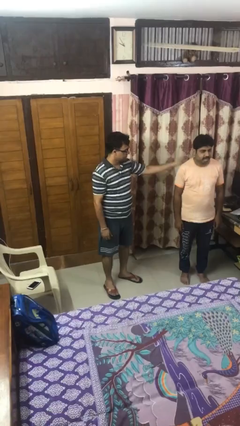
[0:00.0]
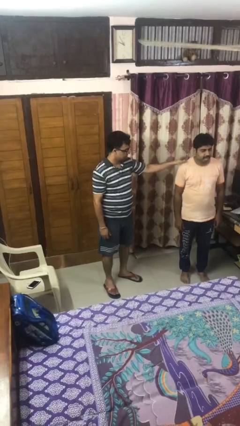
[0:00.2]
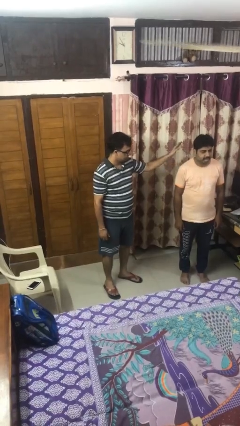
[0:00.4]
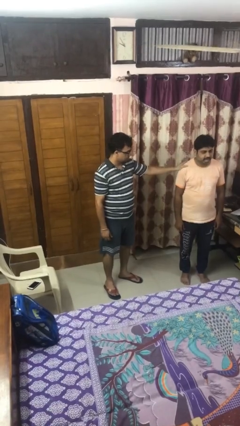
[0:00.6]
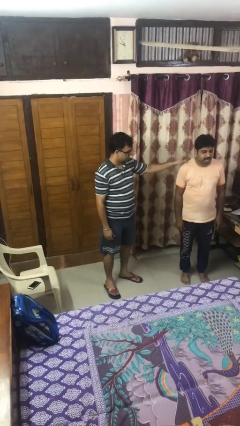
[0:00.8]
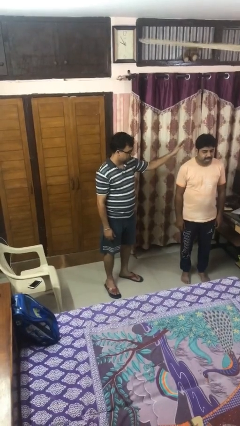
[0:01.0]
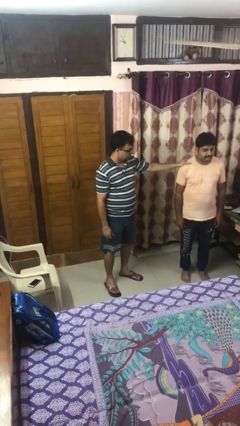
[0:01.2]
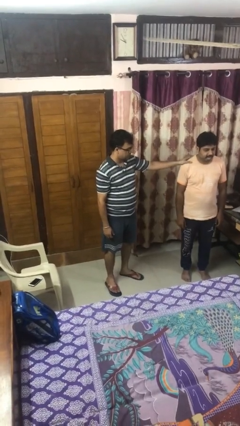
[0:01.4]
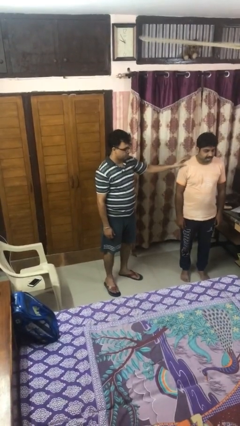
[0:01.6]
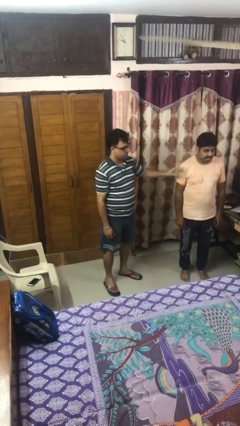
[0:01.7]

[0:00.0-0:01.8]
person pounds shoulders of person

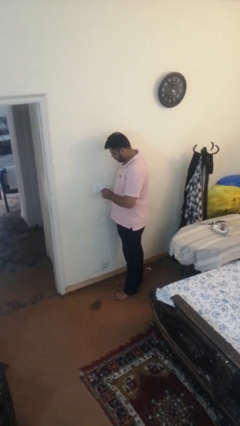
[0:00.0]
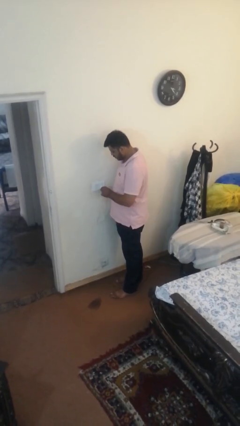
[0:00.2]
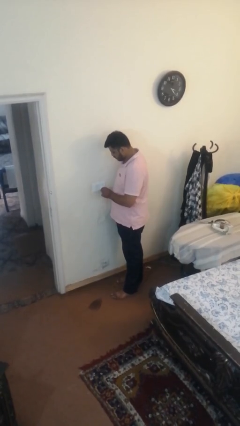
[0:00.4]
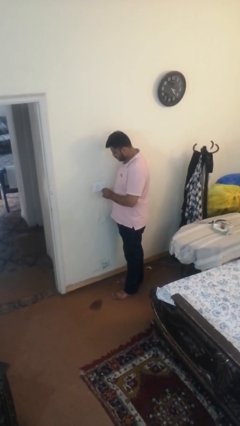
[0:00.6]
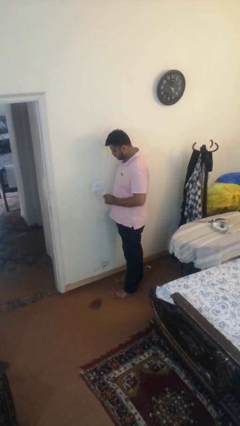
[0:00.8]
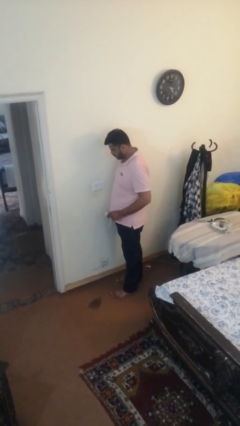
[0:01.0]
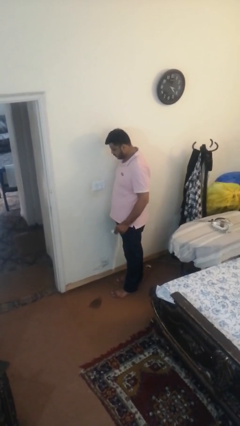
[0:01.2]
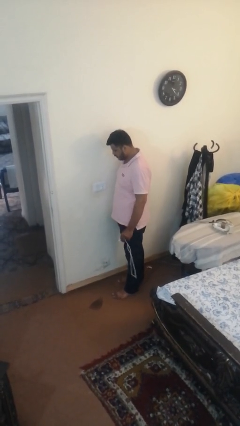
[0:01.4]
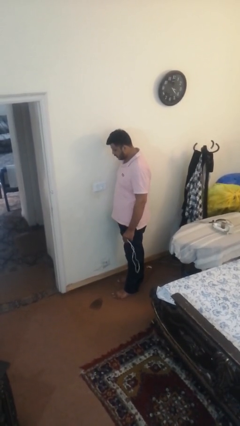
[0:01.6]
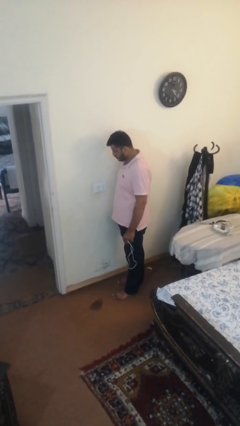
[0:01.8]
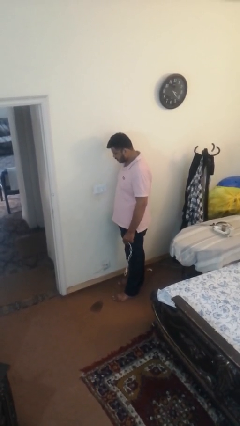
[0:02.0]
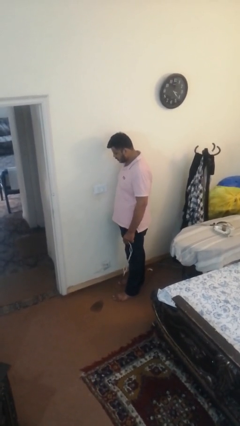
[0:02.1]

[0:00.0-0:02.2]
person unplugs from electrical socket

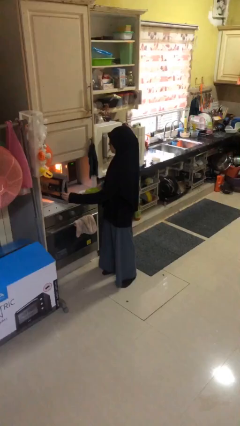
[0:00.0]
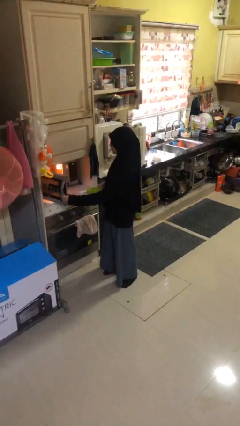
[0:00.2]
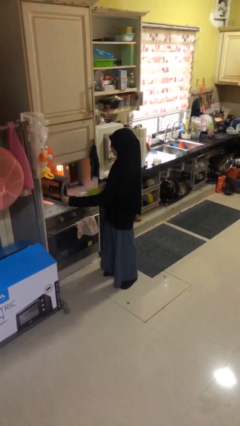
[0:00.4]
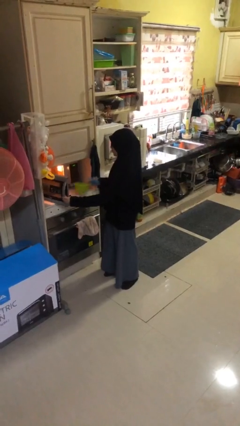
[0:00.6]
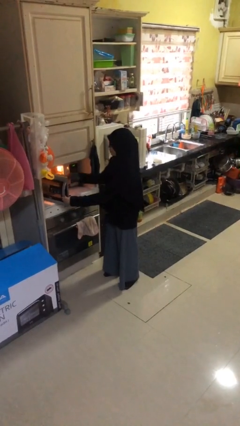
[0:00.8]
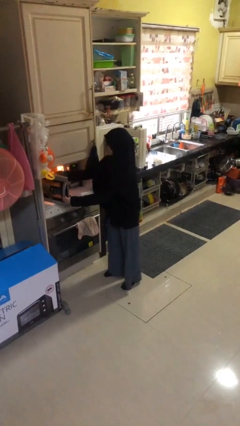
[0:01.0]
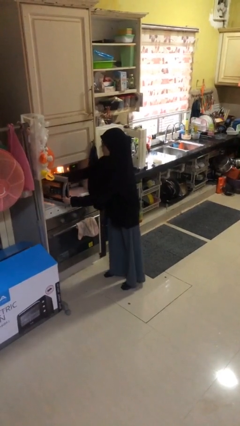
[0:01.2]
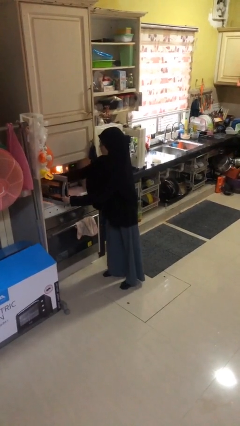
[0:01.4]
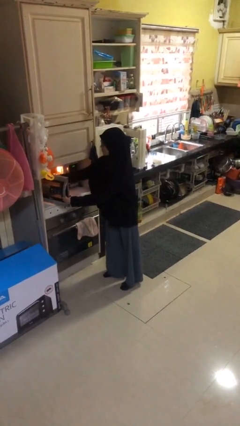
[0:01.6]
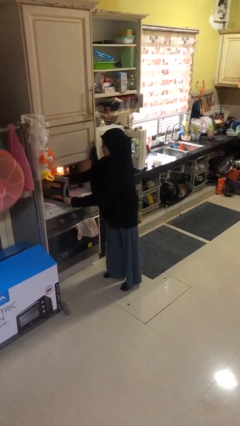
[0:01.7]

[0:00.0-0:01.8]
person puts object into microwave

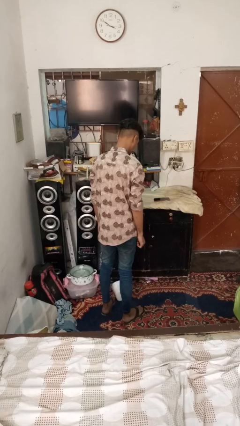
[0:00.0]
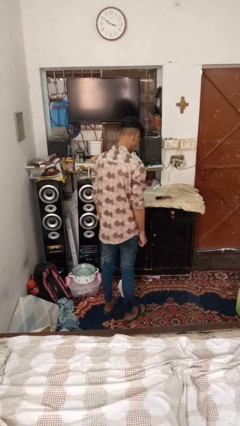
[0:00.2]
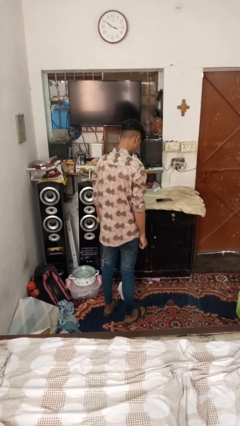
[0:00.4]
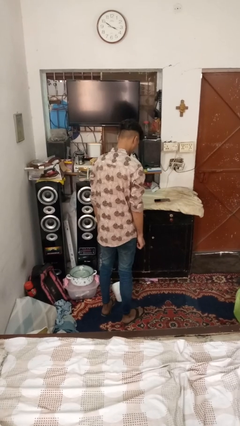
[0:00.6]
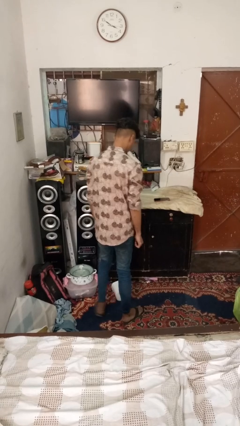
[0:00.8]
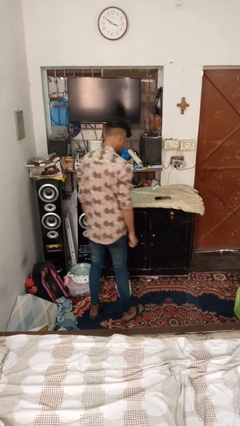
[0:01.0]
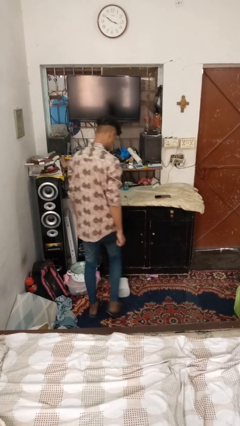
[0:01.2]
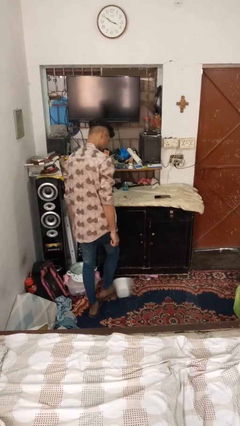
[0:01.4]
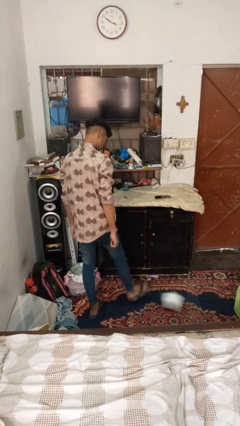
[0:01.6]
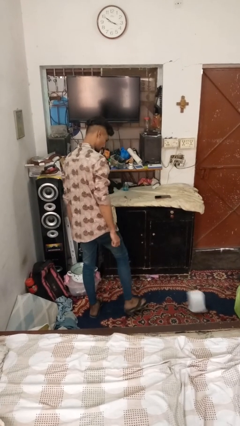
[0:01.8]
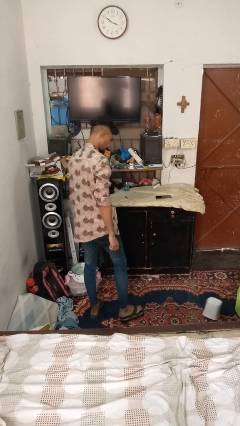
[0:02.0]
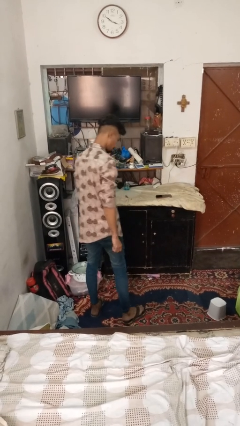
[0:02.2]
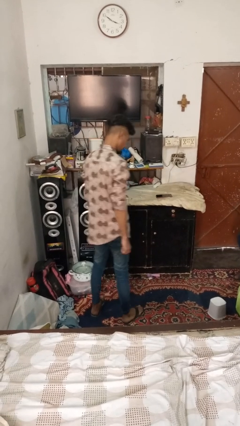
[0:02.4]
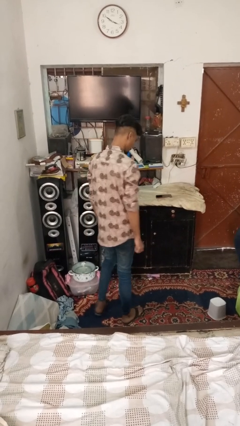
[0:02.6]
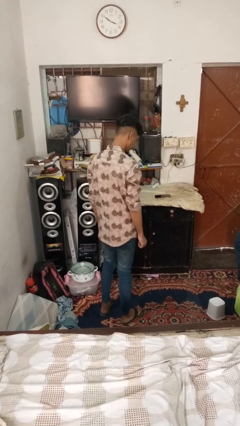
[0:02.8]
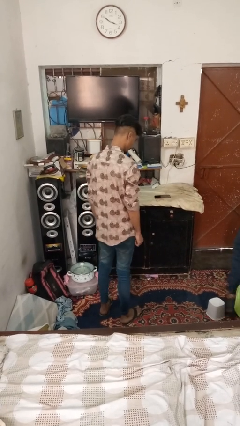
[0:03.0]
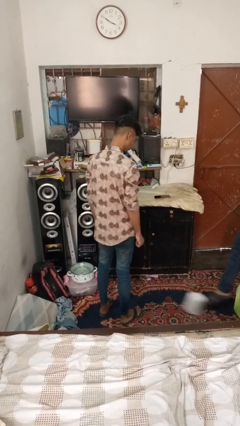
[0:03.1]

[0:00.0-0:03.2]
person kicks object to person

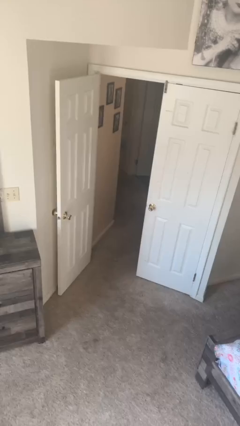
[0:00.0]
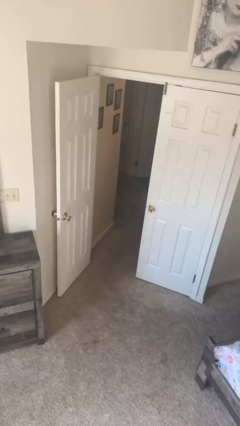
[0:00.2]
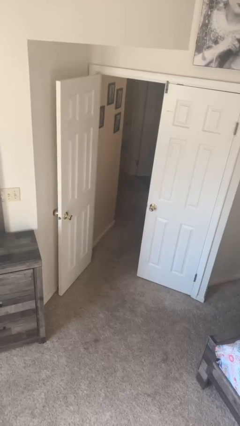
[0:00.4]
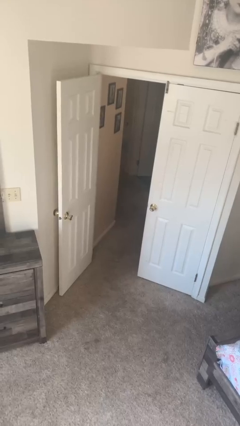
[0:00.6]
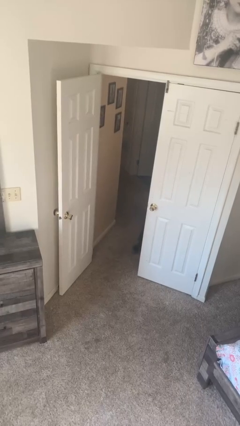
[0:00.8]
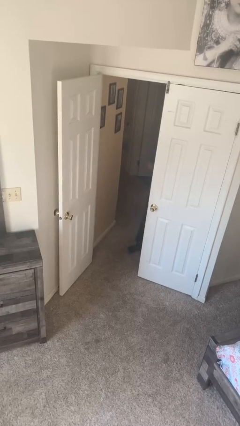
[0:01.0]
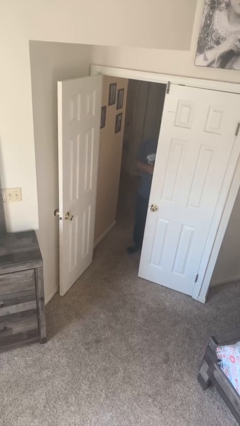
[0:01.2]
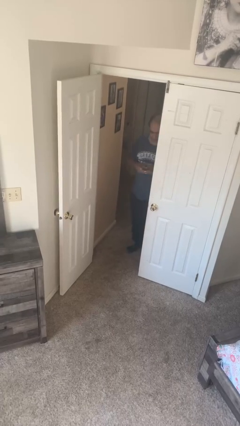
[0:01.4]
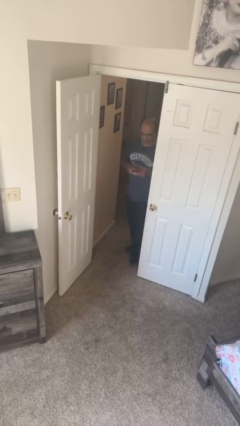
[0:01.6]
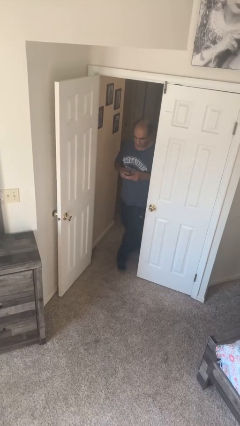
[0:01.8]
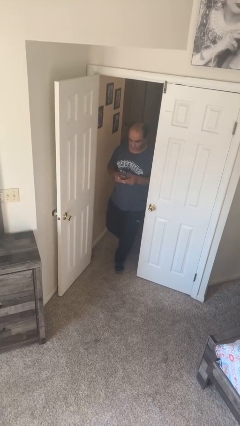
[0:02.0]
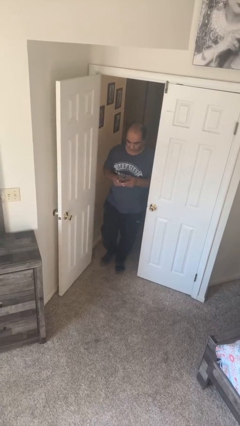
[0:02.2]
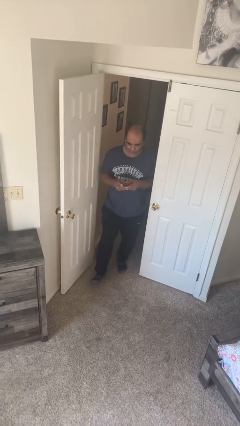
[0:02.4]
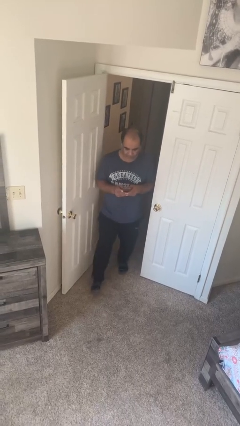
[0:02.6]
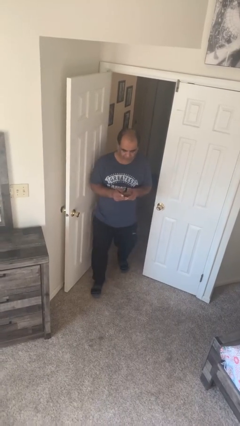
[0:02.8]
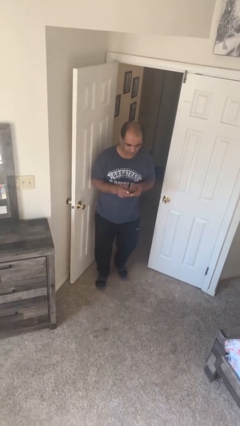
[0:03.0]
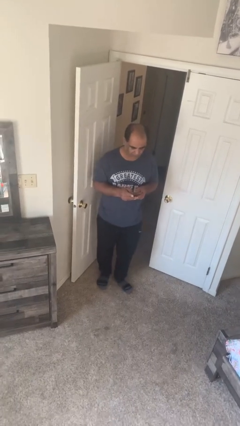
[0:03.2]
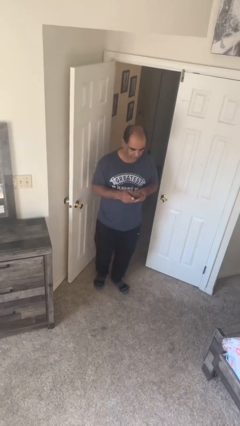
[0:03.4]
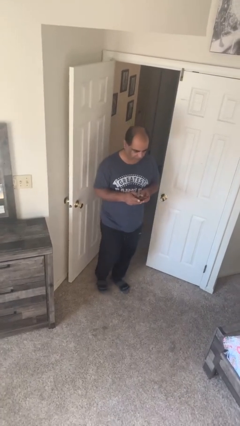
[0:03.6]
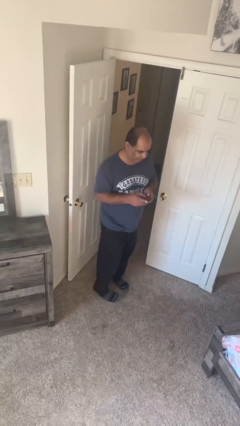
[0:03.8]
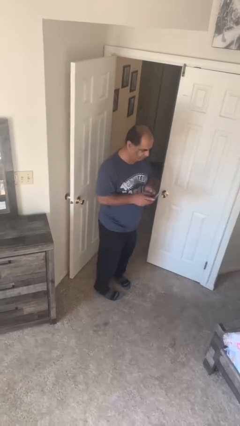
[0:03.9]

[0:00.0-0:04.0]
person enters scene through structure

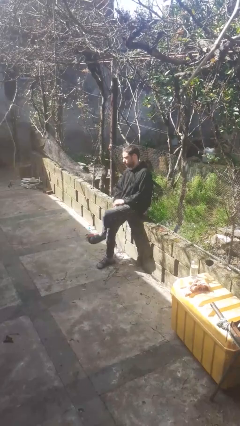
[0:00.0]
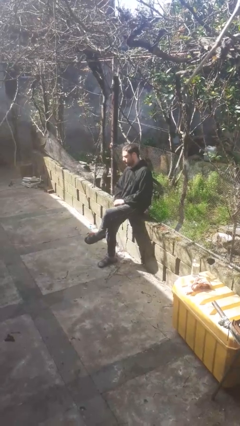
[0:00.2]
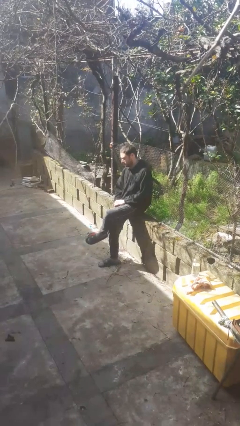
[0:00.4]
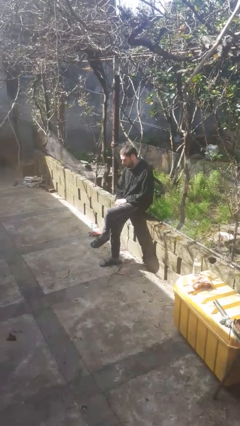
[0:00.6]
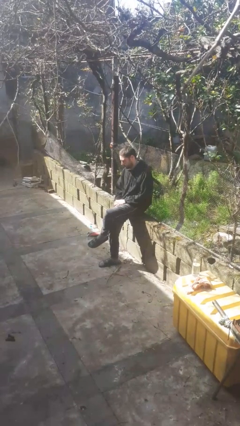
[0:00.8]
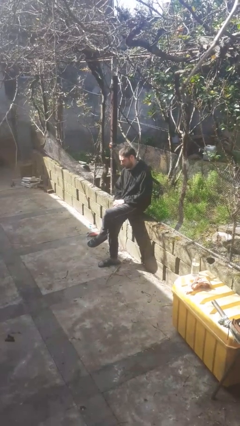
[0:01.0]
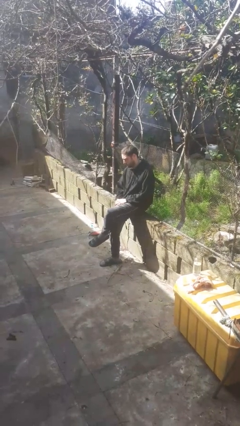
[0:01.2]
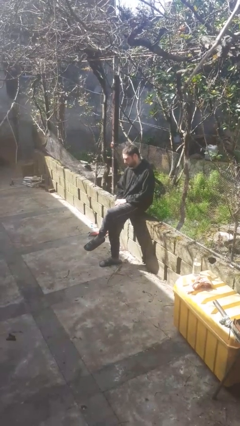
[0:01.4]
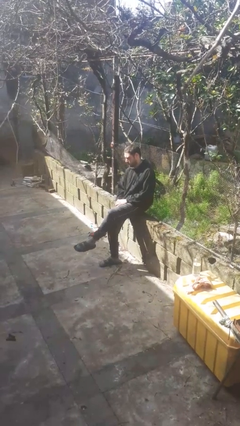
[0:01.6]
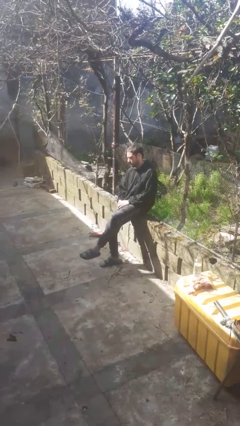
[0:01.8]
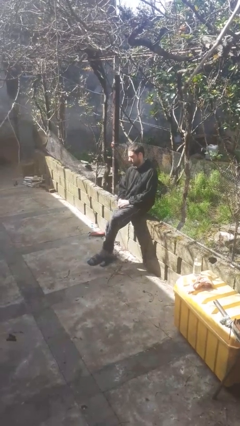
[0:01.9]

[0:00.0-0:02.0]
person crosses legs

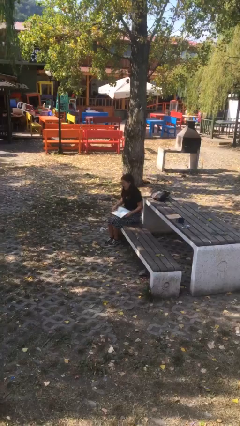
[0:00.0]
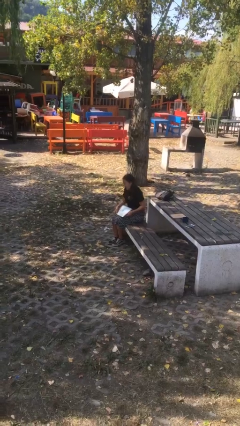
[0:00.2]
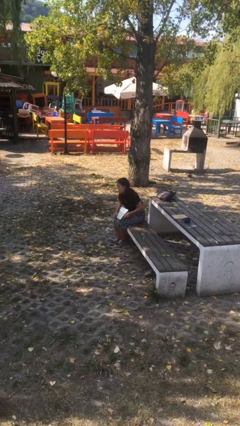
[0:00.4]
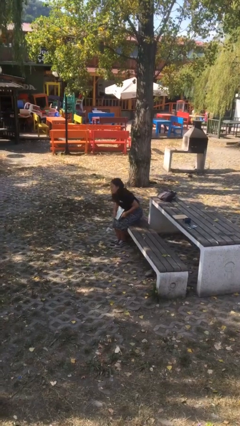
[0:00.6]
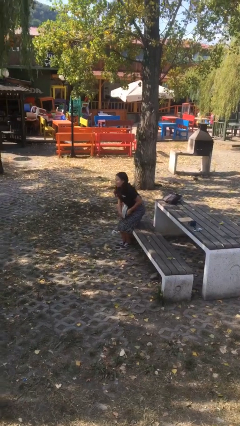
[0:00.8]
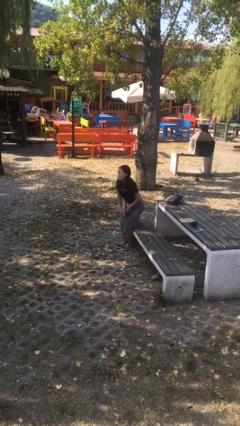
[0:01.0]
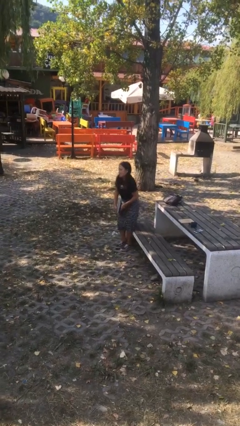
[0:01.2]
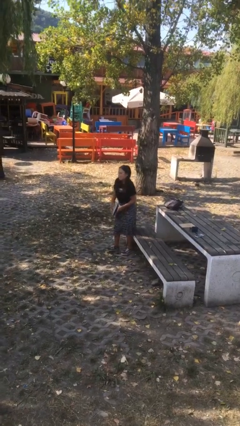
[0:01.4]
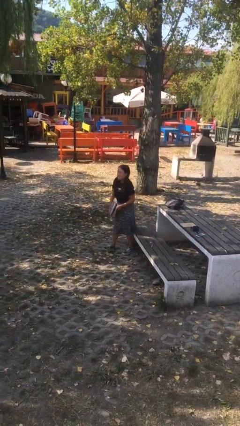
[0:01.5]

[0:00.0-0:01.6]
person stands up

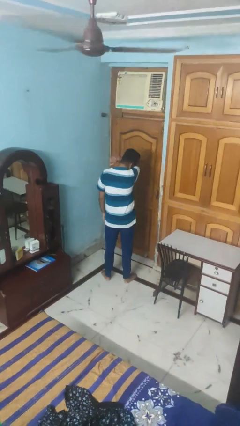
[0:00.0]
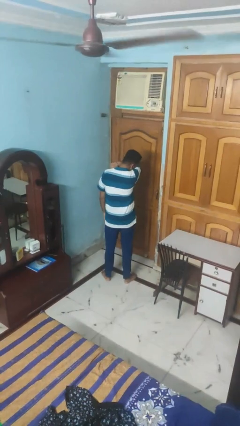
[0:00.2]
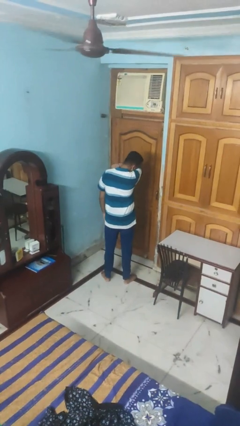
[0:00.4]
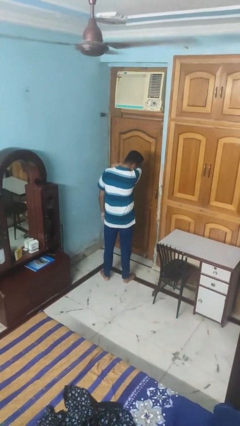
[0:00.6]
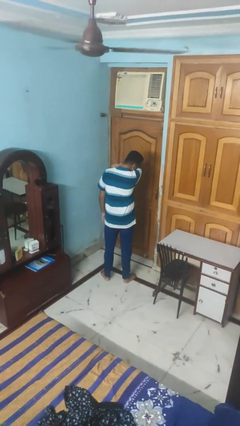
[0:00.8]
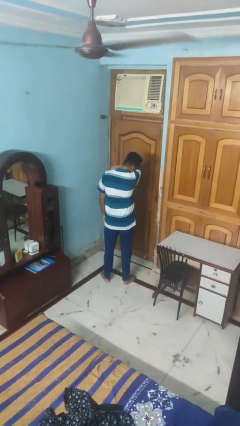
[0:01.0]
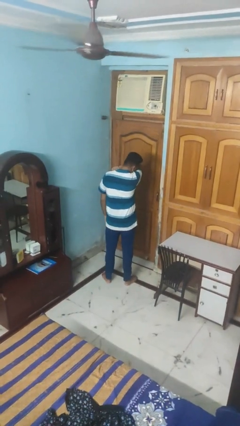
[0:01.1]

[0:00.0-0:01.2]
person sneezes into arm
